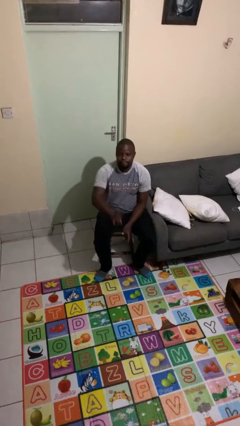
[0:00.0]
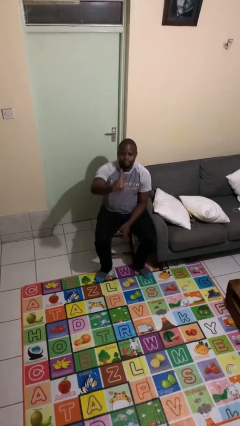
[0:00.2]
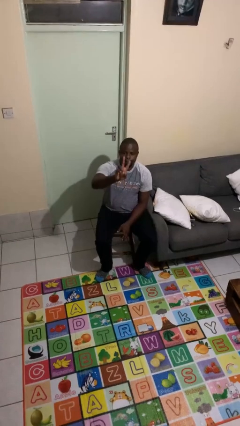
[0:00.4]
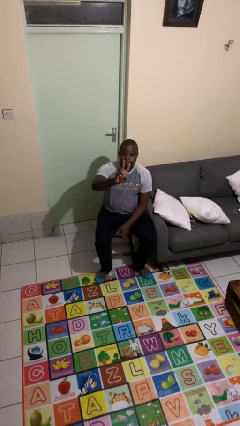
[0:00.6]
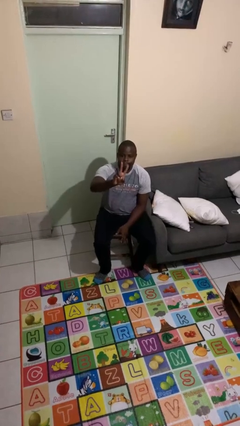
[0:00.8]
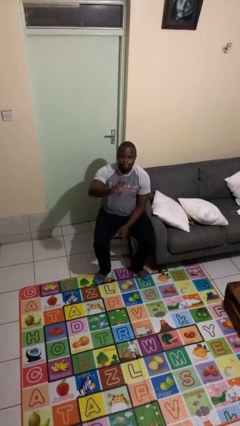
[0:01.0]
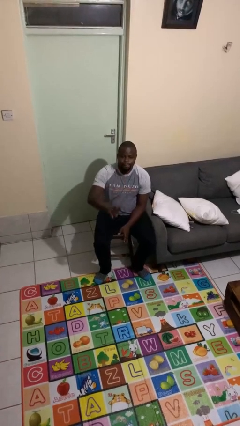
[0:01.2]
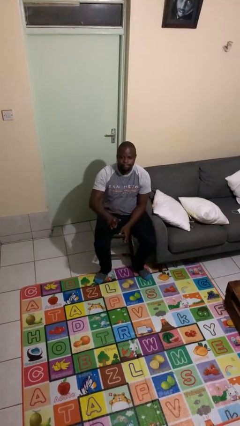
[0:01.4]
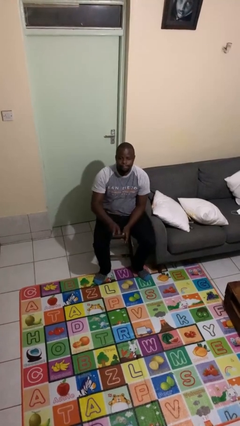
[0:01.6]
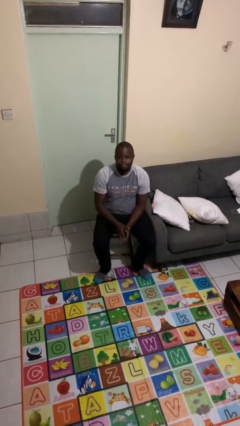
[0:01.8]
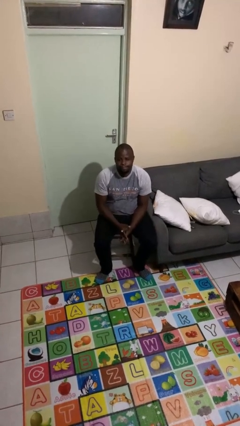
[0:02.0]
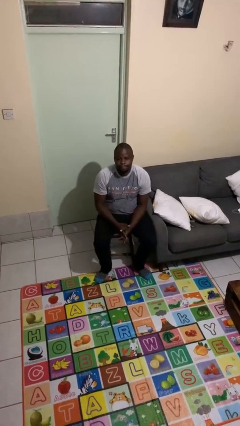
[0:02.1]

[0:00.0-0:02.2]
person gestures peace

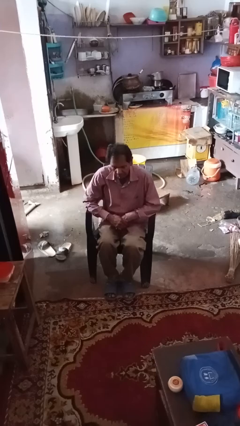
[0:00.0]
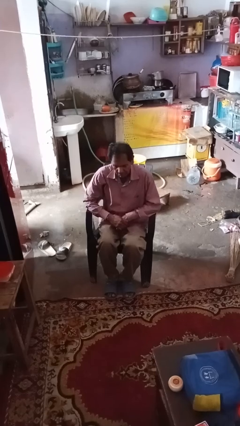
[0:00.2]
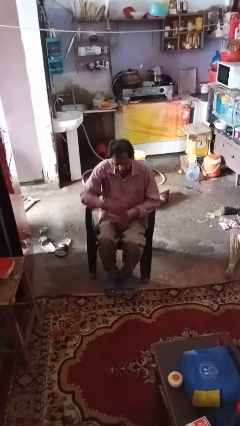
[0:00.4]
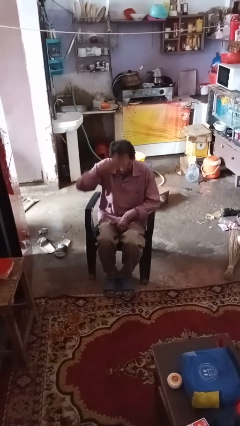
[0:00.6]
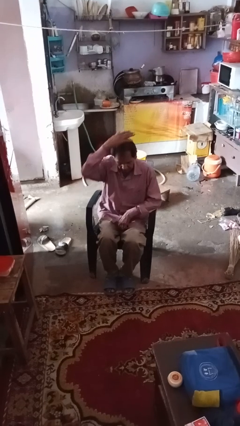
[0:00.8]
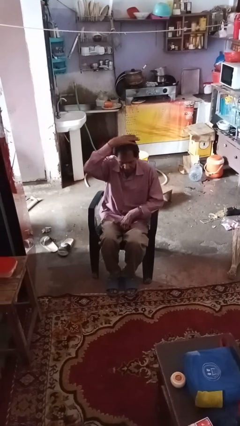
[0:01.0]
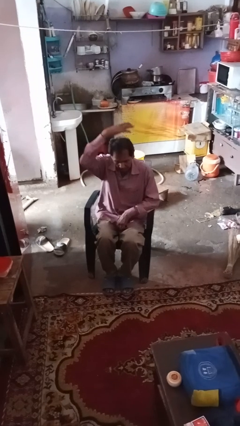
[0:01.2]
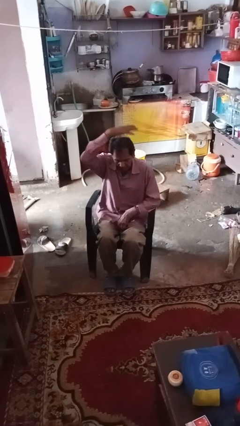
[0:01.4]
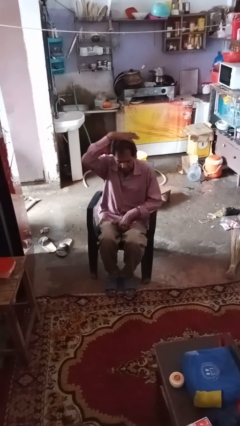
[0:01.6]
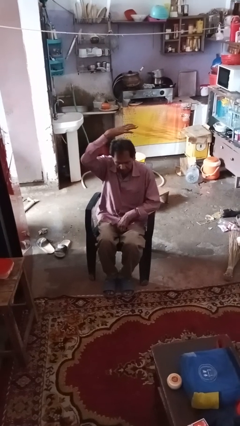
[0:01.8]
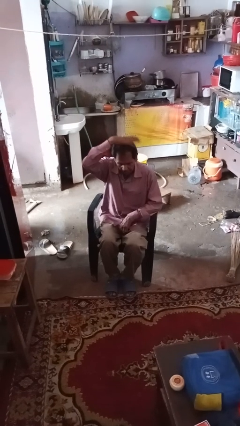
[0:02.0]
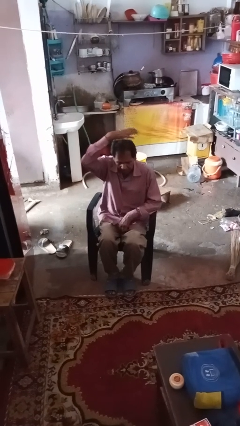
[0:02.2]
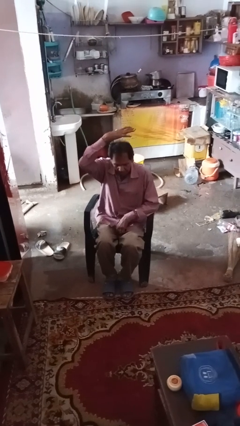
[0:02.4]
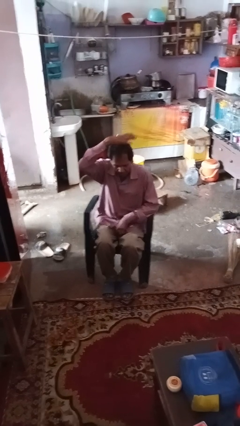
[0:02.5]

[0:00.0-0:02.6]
person pats head

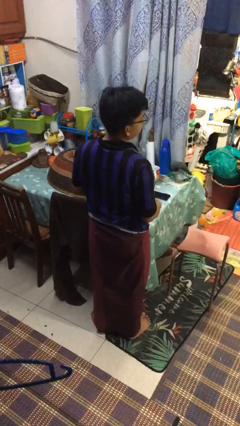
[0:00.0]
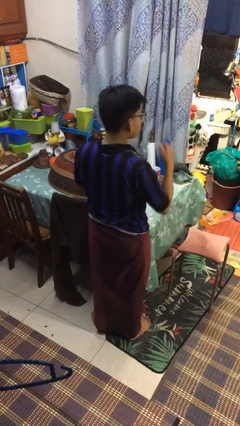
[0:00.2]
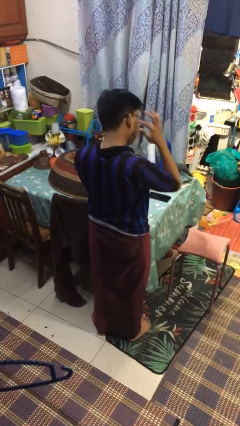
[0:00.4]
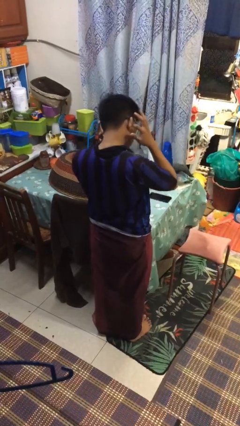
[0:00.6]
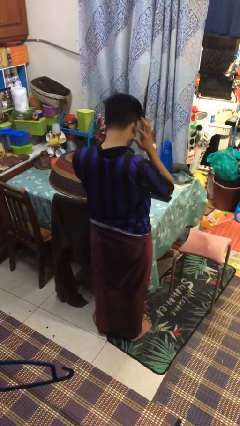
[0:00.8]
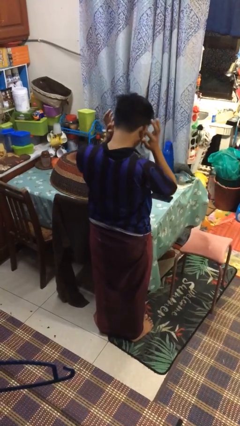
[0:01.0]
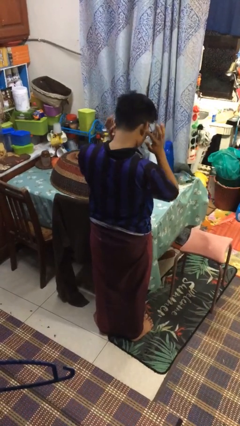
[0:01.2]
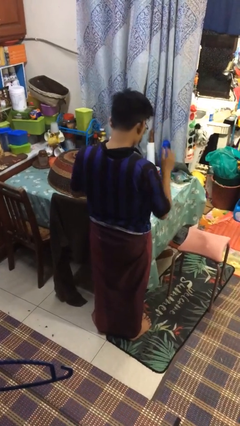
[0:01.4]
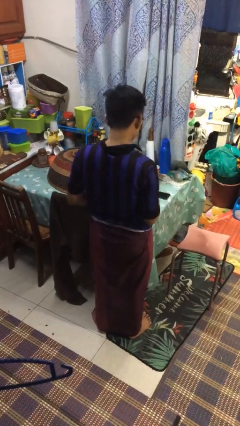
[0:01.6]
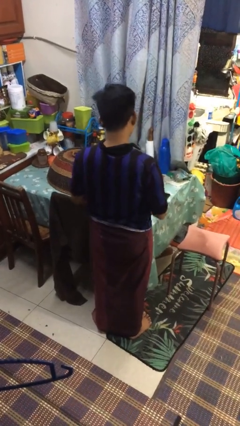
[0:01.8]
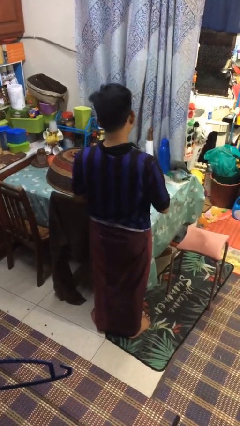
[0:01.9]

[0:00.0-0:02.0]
person puts fingers in ear

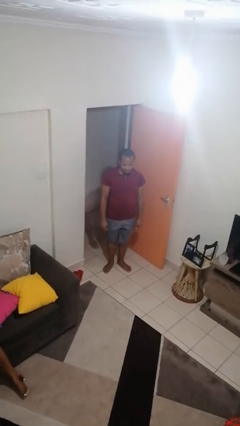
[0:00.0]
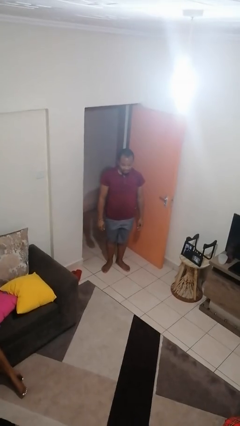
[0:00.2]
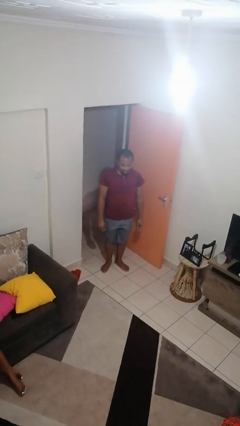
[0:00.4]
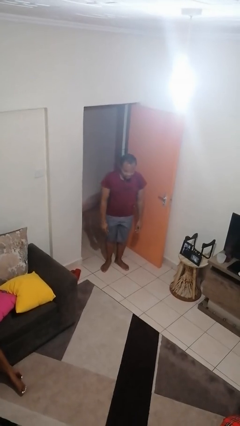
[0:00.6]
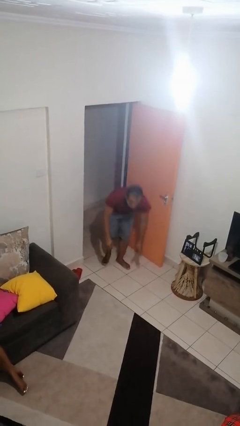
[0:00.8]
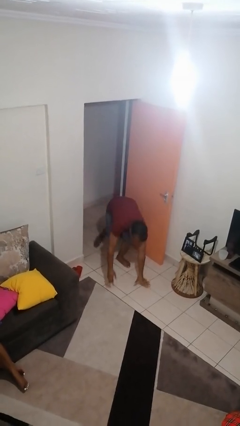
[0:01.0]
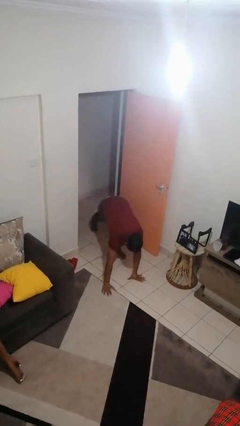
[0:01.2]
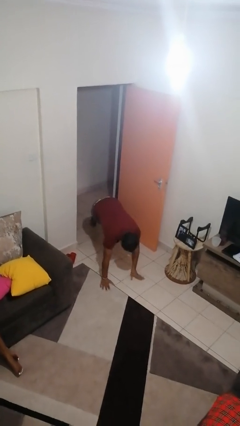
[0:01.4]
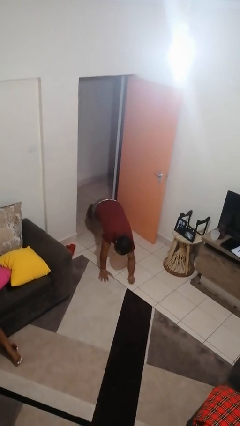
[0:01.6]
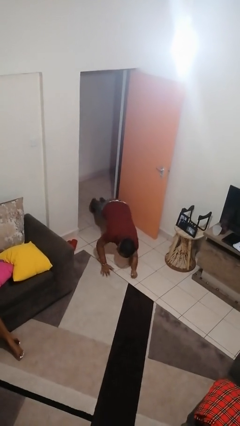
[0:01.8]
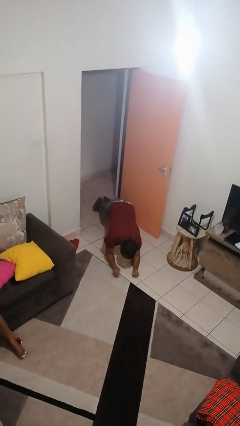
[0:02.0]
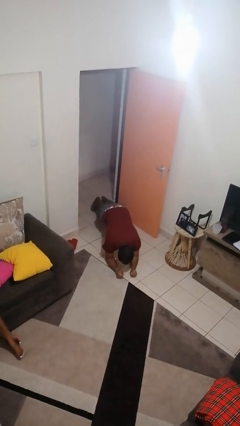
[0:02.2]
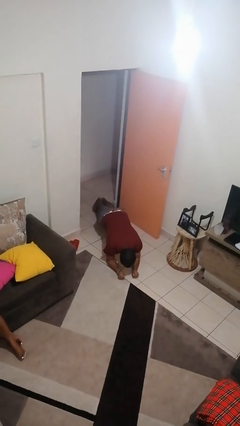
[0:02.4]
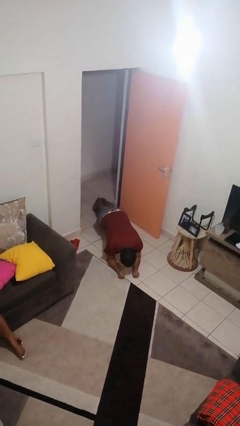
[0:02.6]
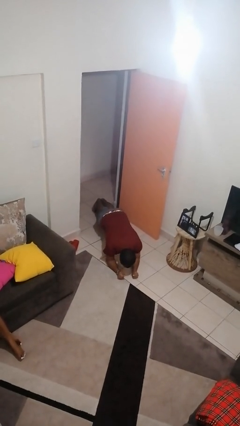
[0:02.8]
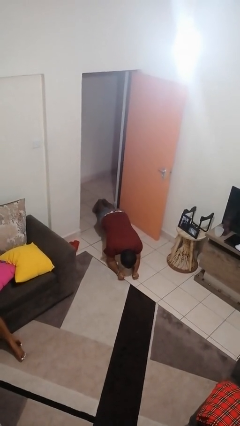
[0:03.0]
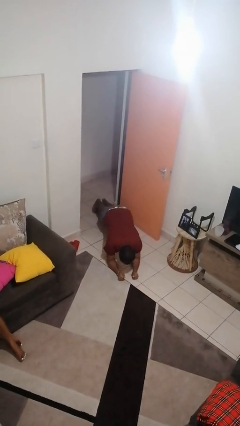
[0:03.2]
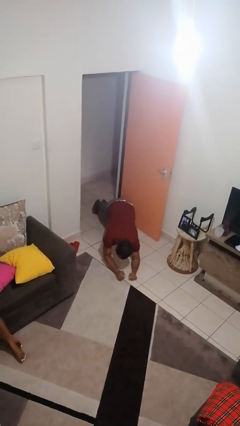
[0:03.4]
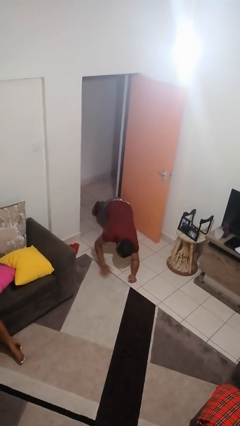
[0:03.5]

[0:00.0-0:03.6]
person exercises with plank

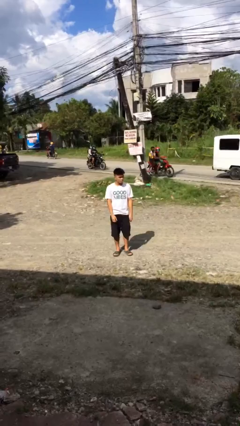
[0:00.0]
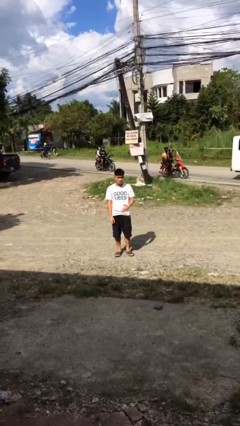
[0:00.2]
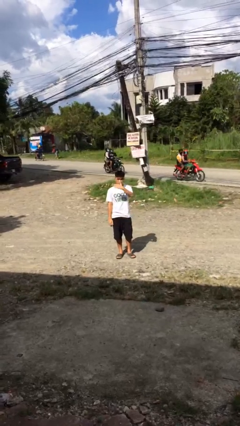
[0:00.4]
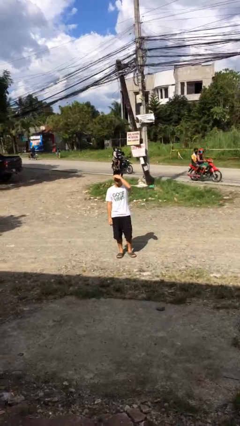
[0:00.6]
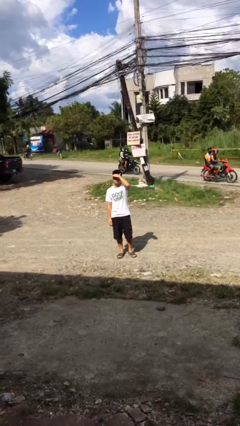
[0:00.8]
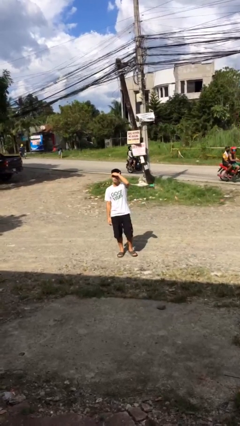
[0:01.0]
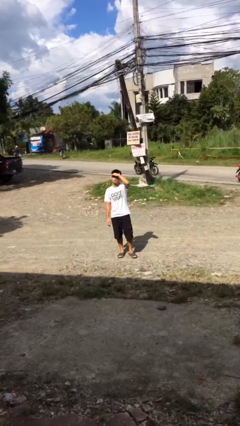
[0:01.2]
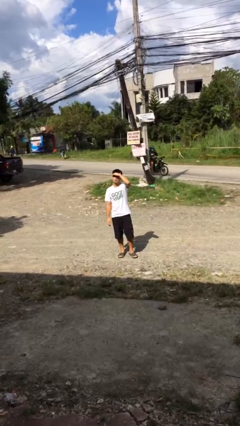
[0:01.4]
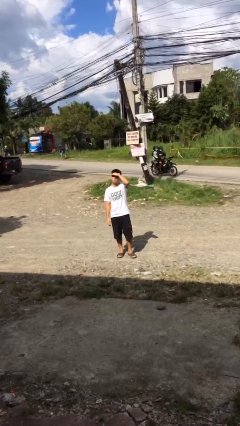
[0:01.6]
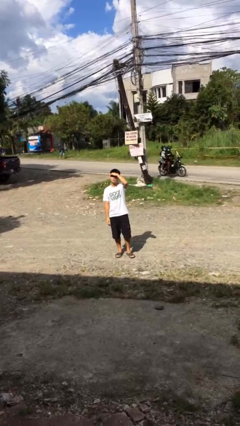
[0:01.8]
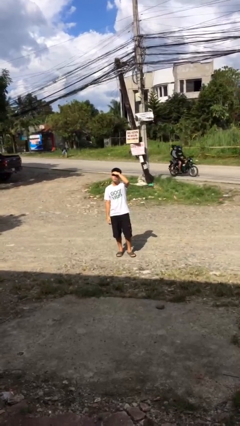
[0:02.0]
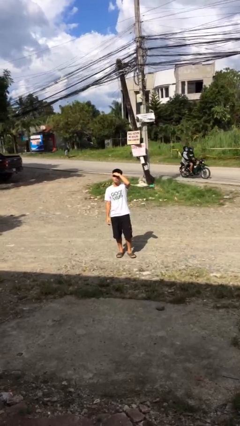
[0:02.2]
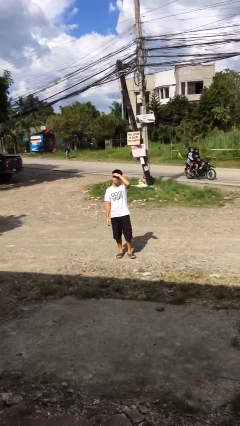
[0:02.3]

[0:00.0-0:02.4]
person shades eyes

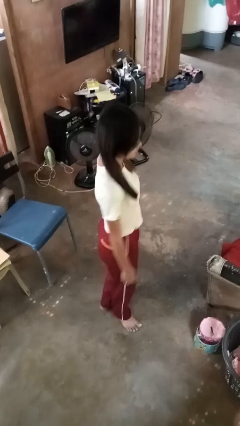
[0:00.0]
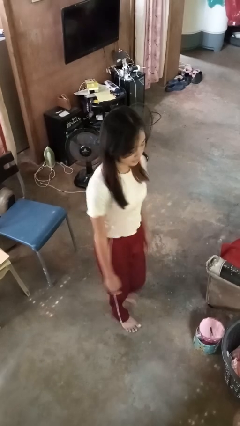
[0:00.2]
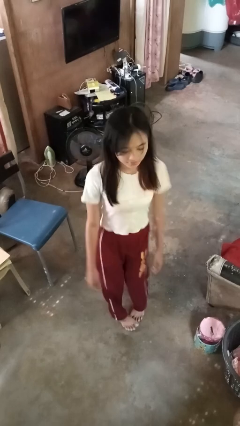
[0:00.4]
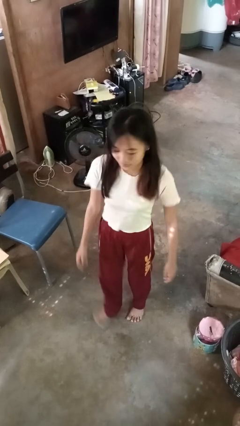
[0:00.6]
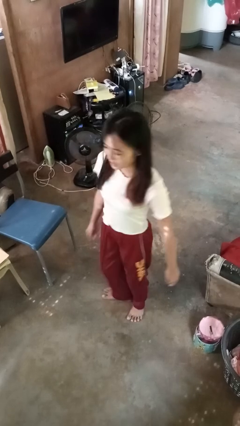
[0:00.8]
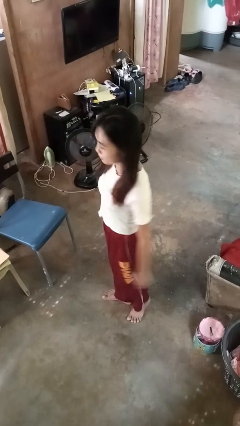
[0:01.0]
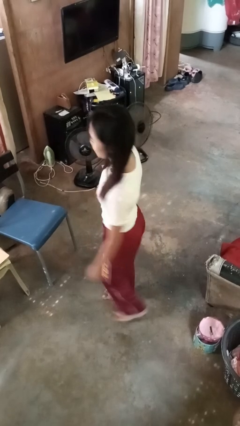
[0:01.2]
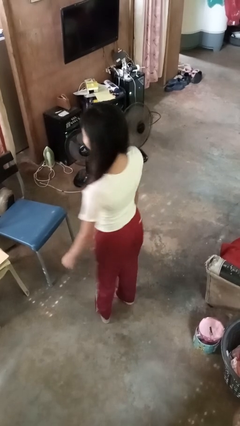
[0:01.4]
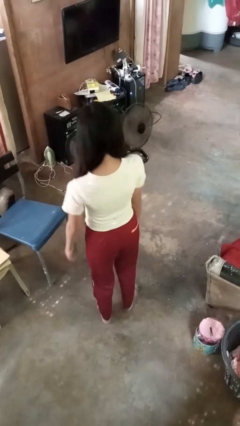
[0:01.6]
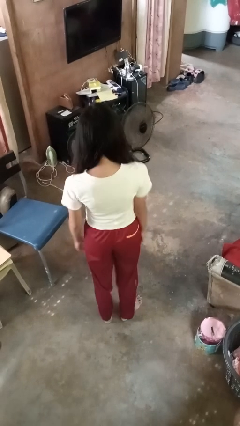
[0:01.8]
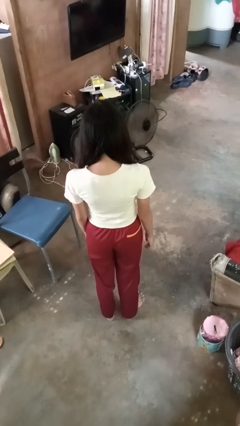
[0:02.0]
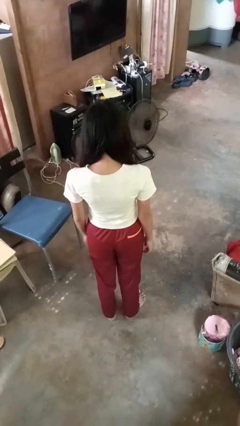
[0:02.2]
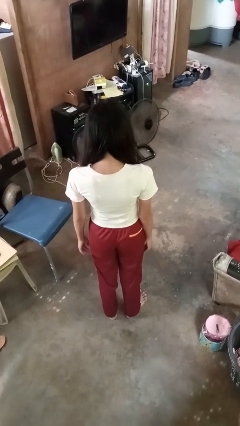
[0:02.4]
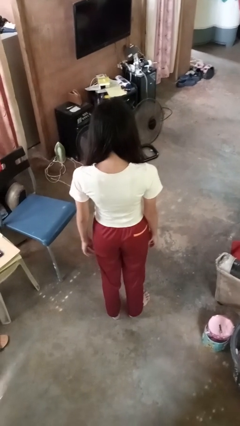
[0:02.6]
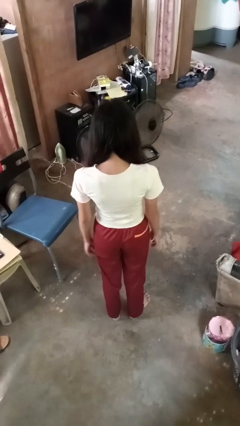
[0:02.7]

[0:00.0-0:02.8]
person twirls

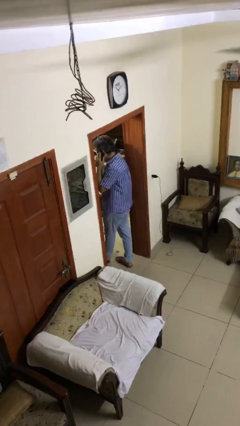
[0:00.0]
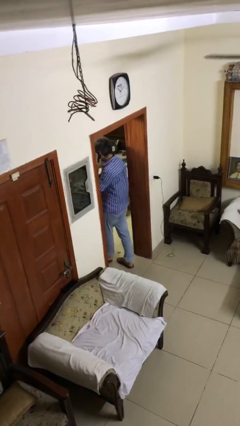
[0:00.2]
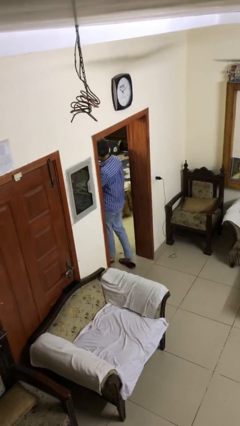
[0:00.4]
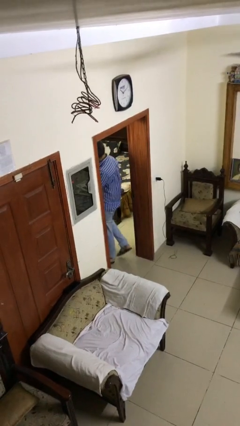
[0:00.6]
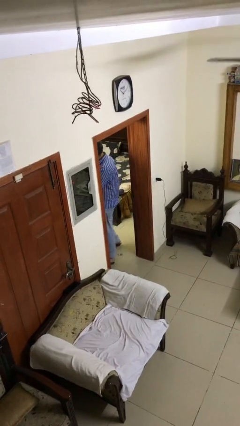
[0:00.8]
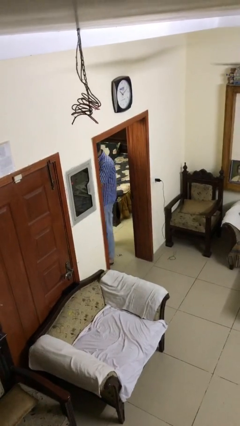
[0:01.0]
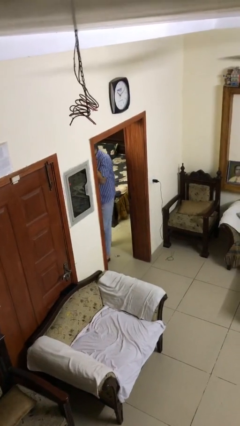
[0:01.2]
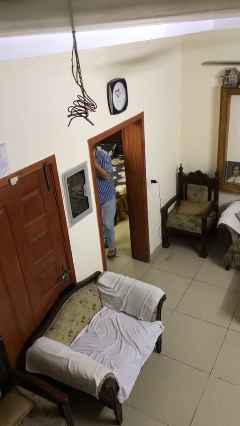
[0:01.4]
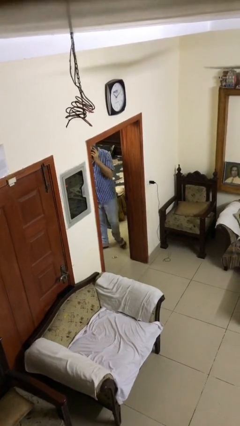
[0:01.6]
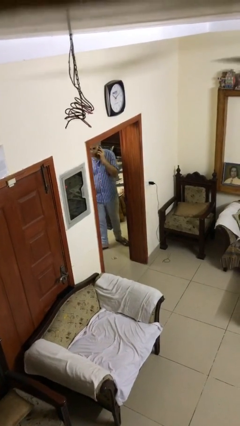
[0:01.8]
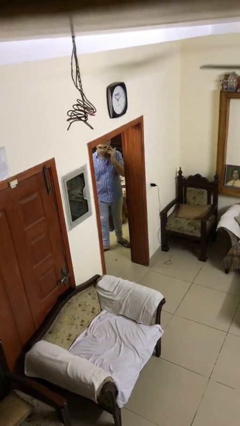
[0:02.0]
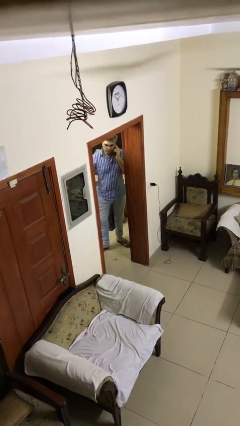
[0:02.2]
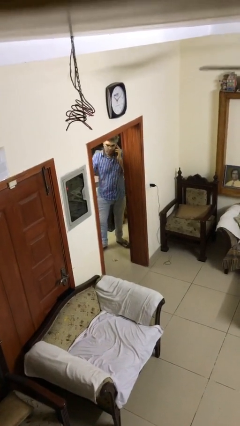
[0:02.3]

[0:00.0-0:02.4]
person exits scene through structure
